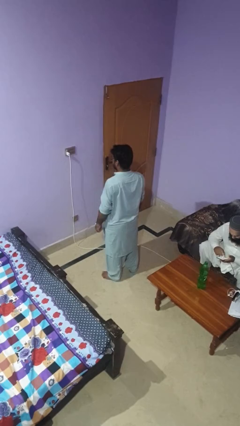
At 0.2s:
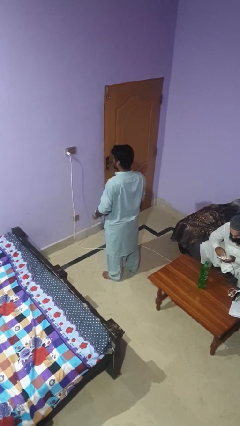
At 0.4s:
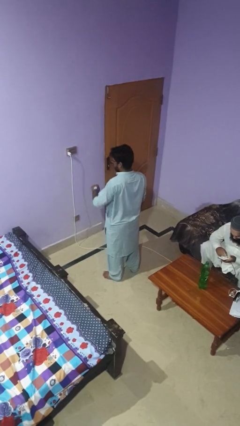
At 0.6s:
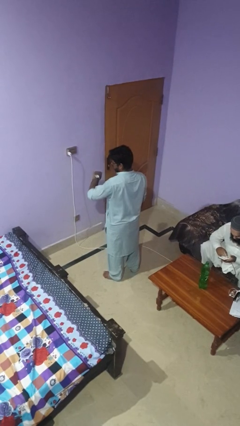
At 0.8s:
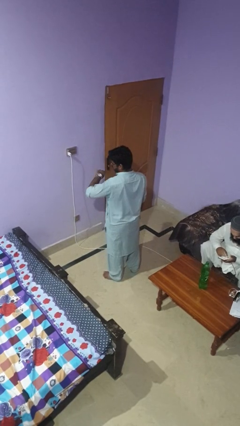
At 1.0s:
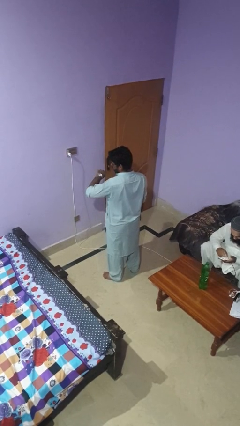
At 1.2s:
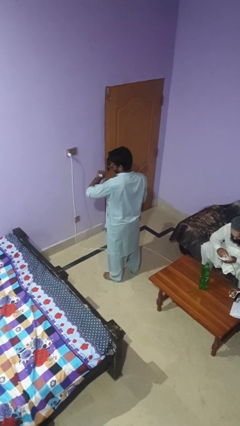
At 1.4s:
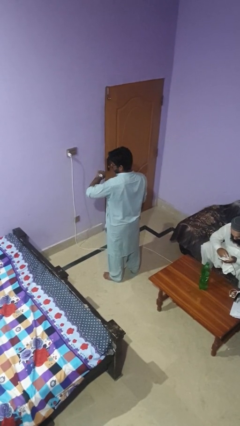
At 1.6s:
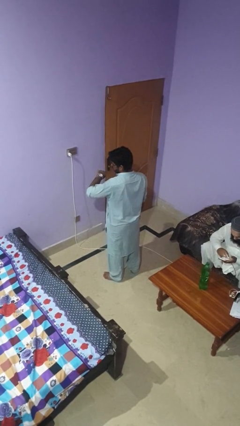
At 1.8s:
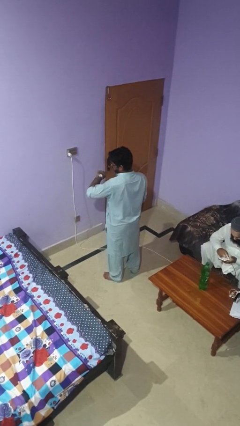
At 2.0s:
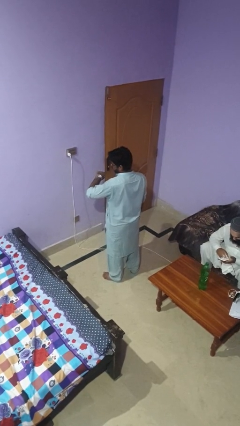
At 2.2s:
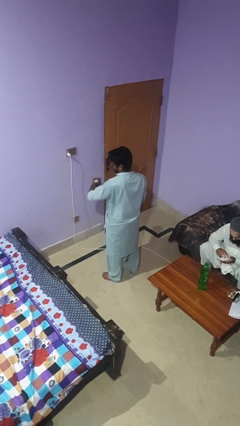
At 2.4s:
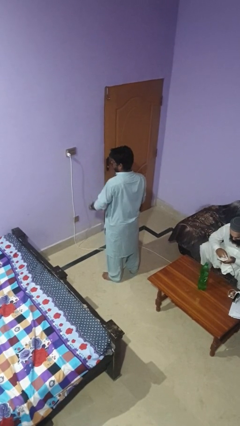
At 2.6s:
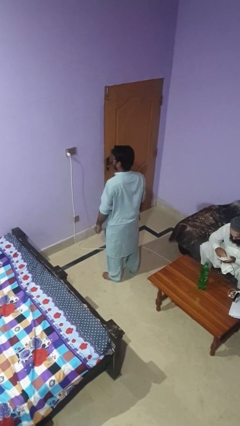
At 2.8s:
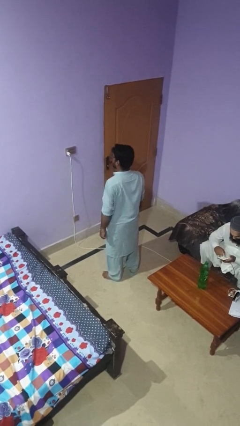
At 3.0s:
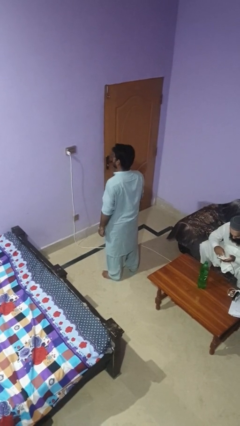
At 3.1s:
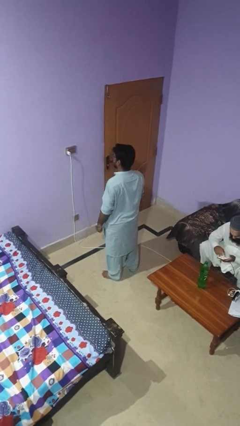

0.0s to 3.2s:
person looks at wristwatch

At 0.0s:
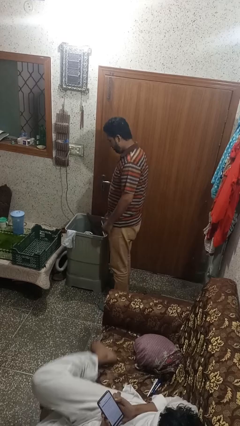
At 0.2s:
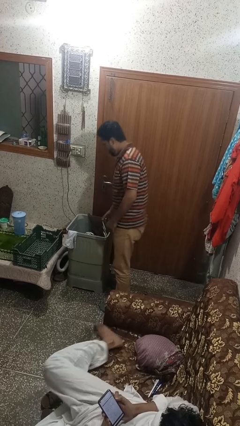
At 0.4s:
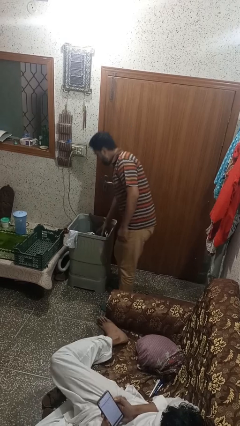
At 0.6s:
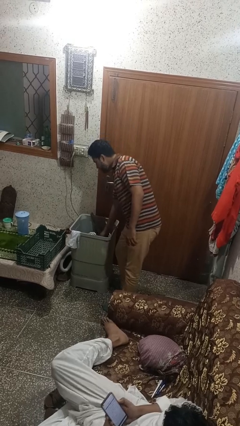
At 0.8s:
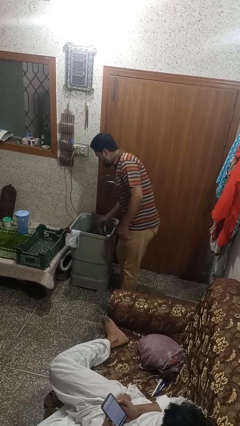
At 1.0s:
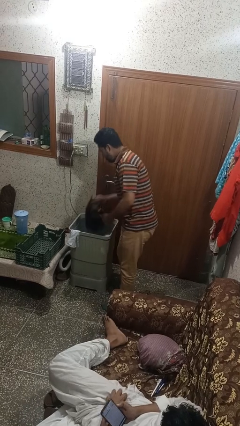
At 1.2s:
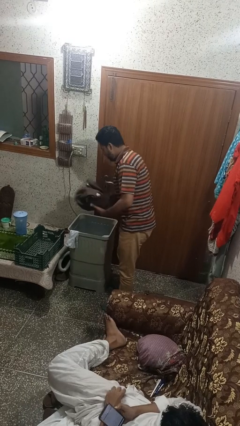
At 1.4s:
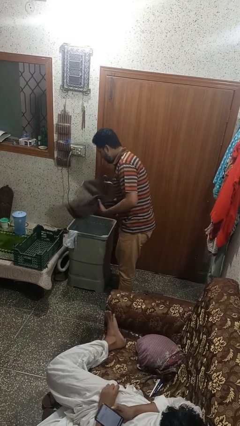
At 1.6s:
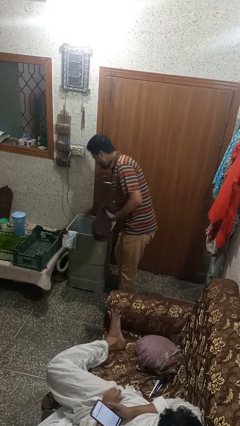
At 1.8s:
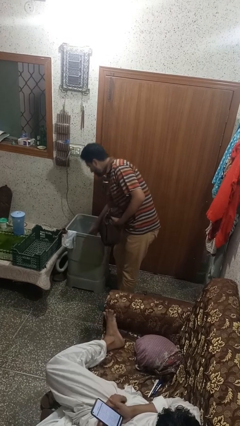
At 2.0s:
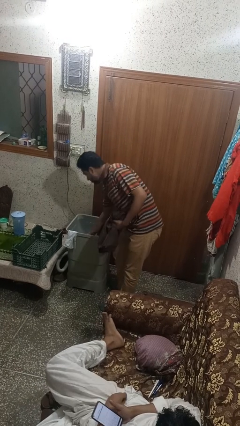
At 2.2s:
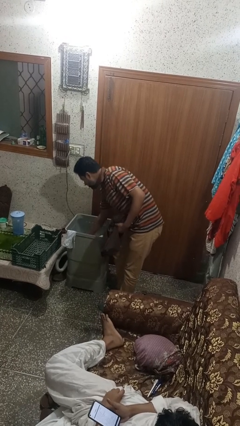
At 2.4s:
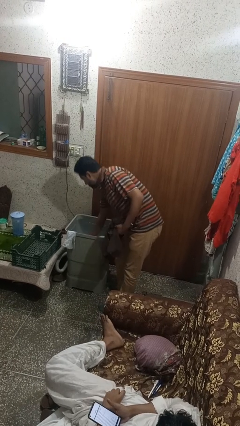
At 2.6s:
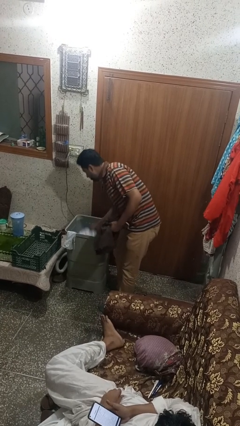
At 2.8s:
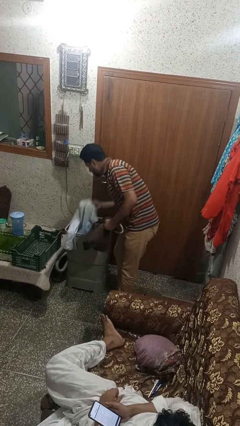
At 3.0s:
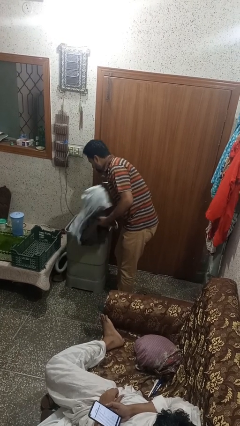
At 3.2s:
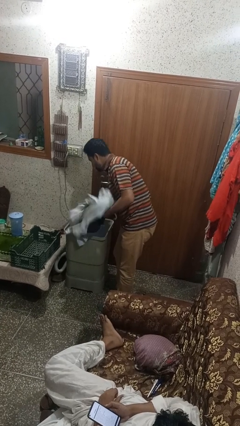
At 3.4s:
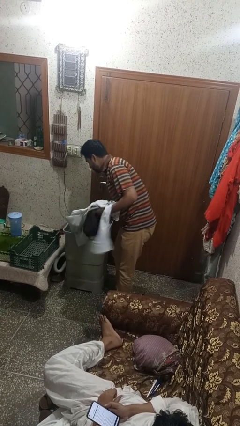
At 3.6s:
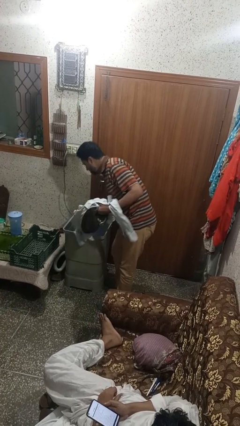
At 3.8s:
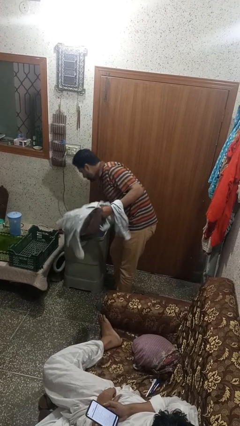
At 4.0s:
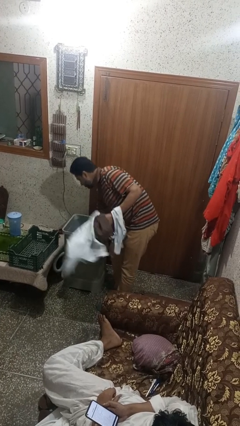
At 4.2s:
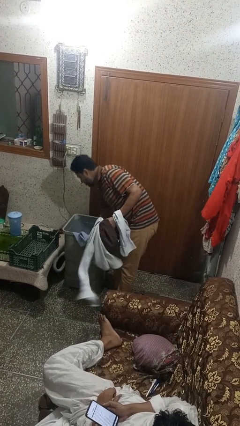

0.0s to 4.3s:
person unloads dryer

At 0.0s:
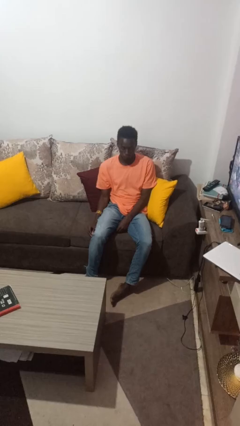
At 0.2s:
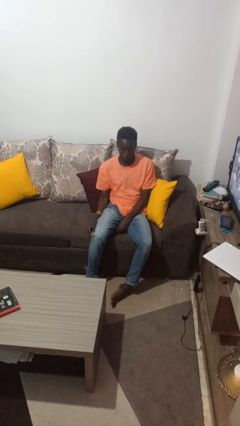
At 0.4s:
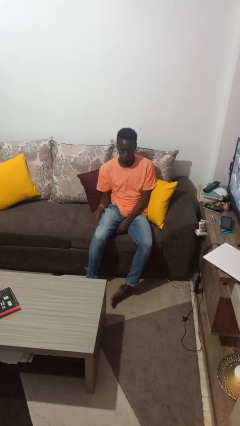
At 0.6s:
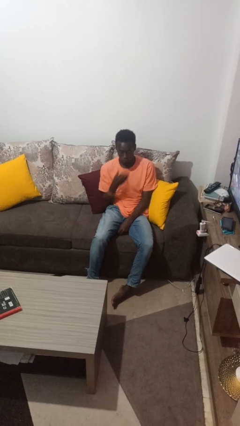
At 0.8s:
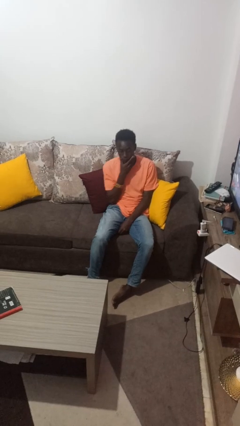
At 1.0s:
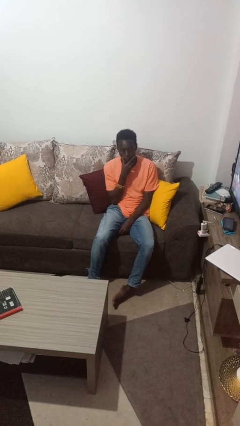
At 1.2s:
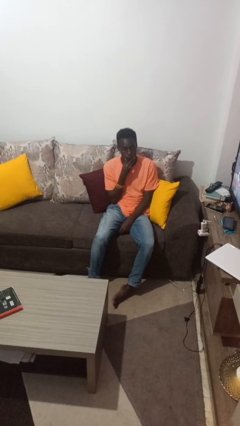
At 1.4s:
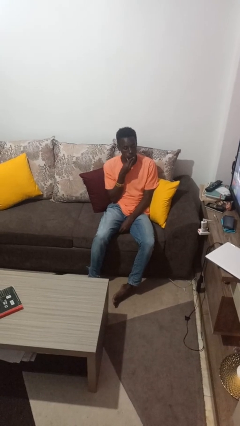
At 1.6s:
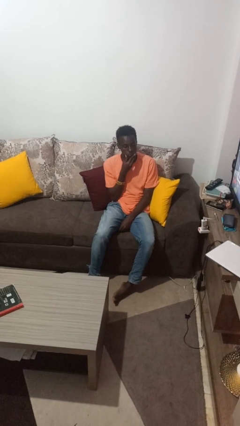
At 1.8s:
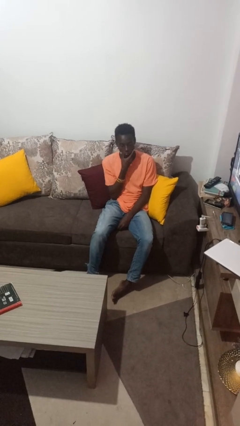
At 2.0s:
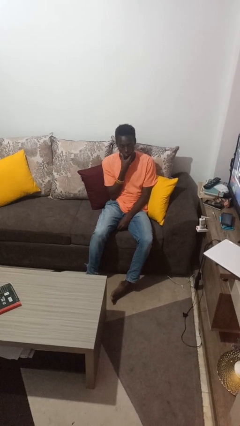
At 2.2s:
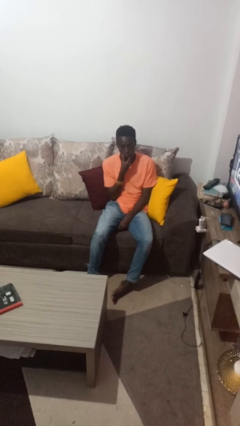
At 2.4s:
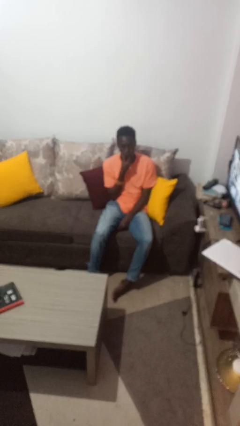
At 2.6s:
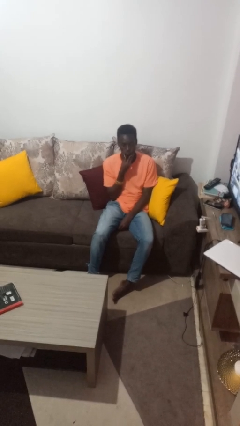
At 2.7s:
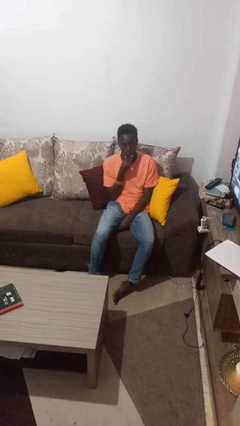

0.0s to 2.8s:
person strokes chin

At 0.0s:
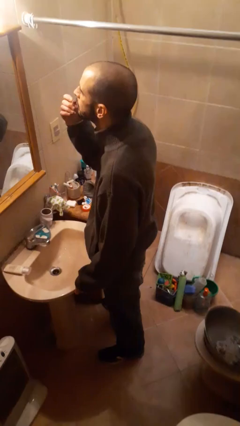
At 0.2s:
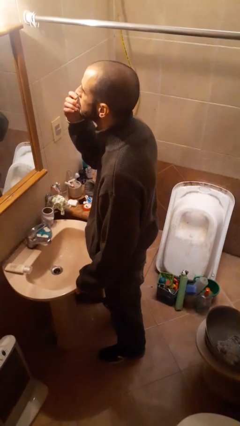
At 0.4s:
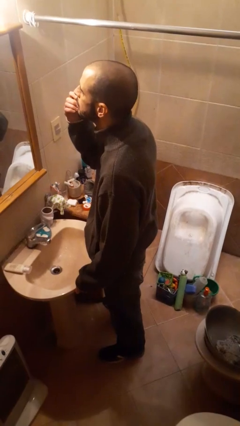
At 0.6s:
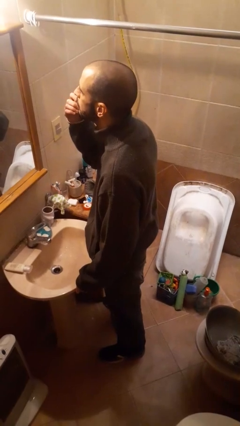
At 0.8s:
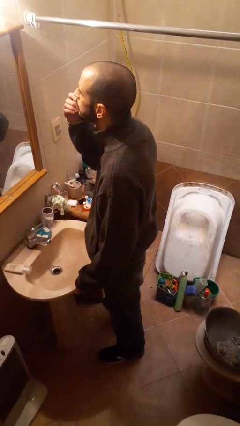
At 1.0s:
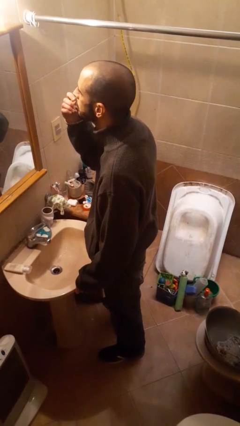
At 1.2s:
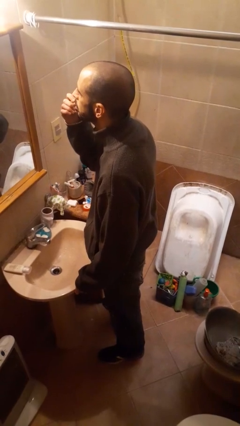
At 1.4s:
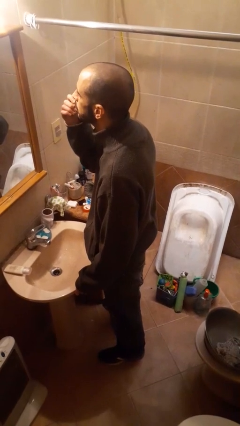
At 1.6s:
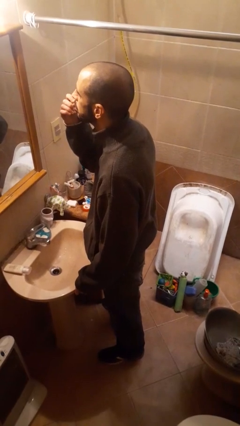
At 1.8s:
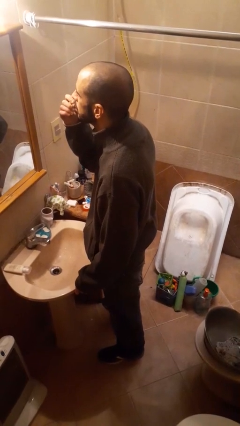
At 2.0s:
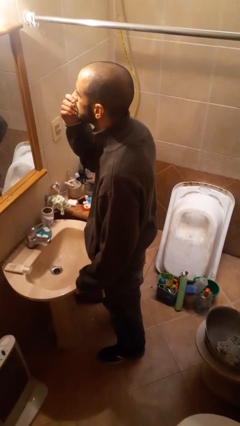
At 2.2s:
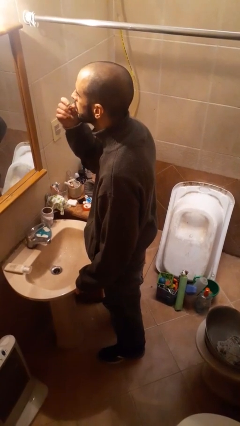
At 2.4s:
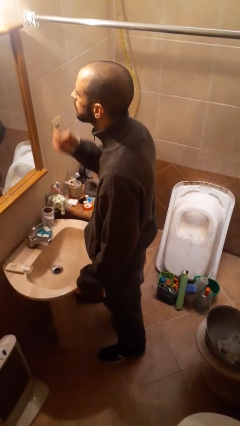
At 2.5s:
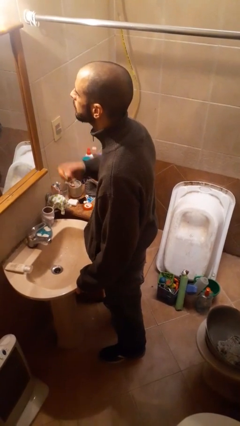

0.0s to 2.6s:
person applies lip makeup

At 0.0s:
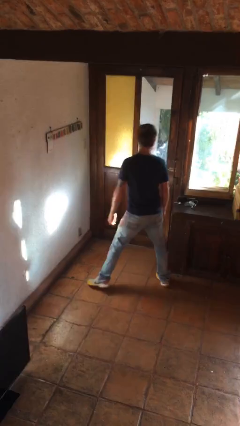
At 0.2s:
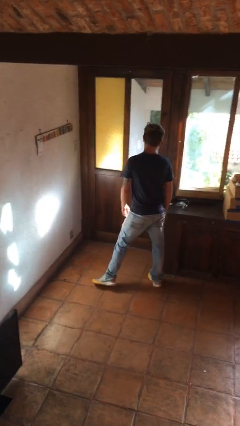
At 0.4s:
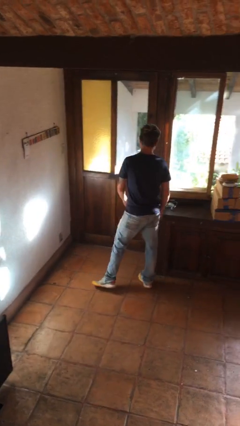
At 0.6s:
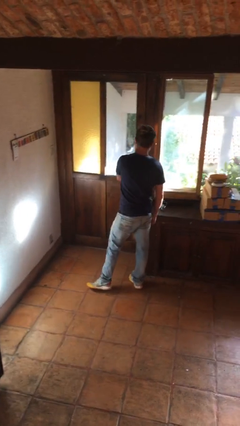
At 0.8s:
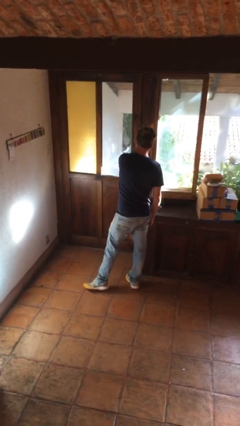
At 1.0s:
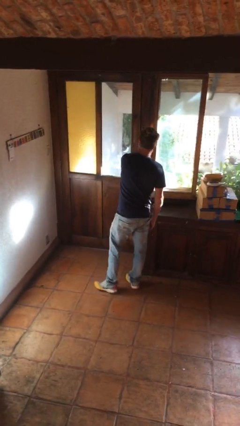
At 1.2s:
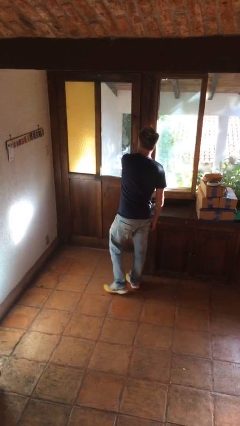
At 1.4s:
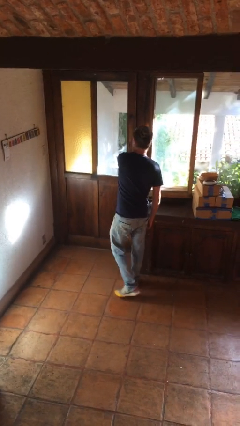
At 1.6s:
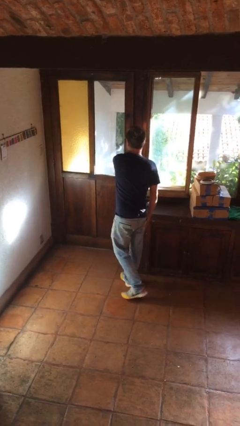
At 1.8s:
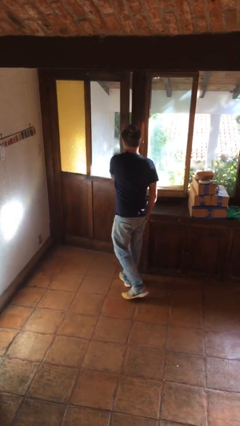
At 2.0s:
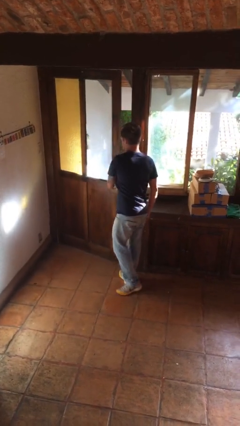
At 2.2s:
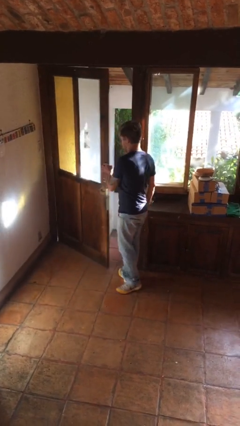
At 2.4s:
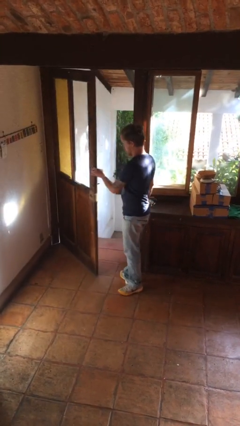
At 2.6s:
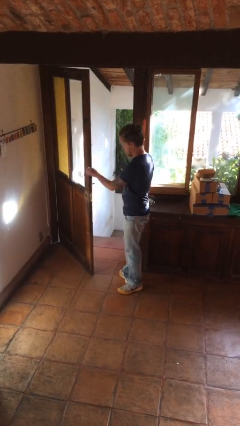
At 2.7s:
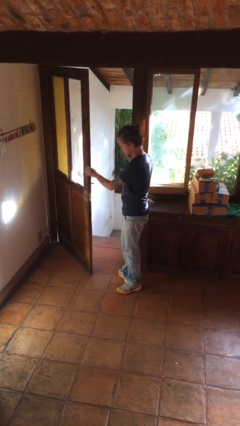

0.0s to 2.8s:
person opens facility door

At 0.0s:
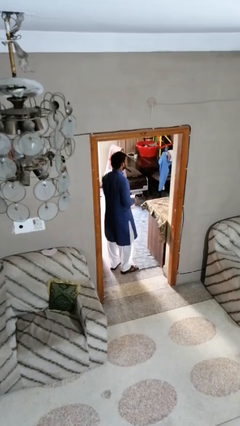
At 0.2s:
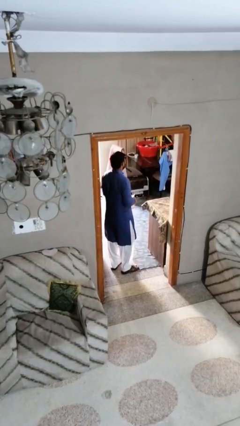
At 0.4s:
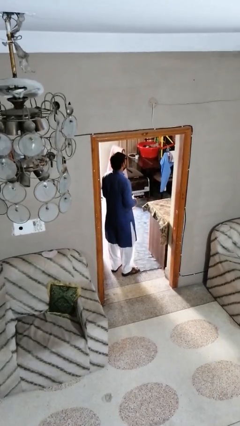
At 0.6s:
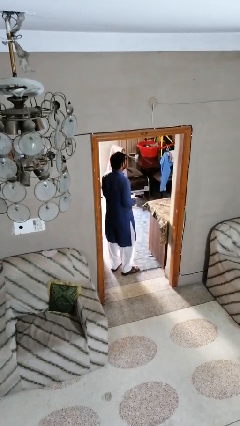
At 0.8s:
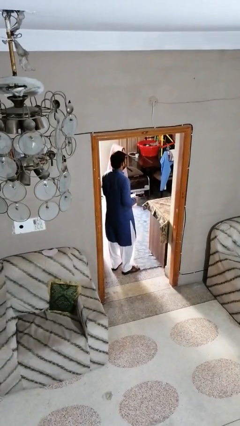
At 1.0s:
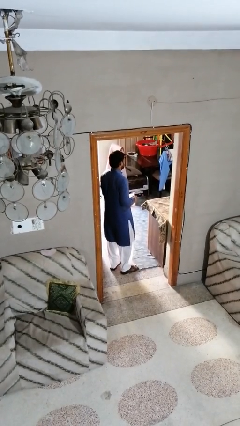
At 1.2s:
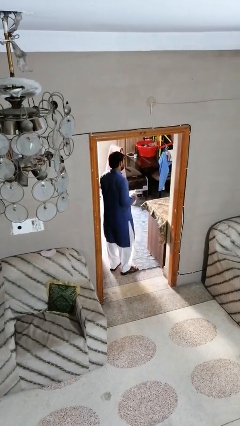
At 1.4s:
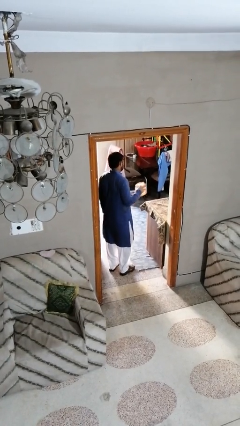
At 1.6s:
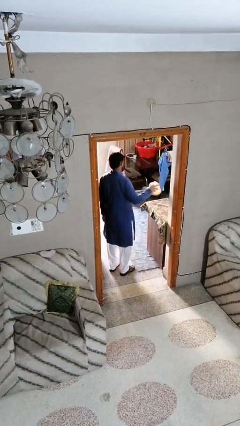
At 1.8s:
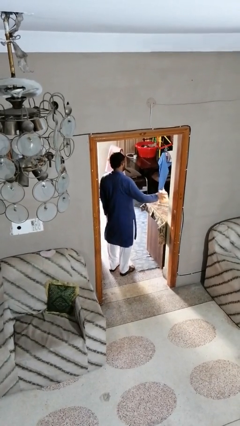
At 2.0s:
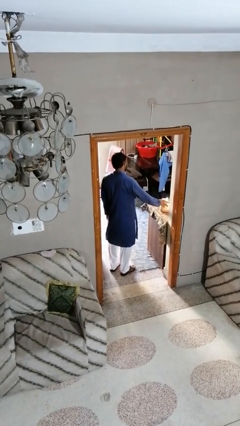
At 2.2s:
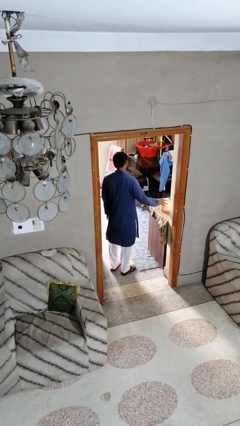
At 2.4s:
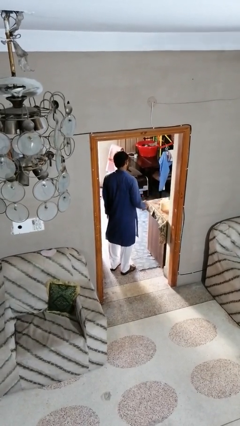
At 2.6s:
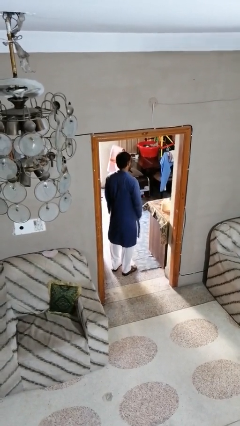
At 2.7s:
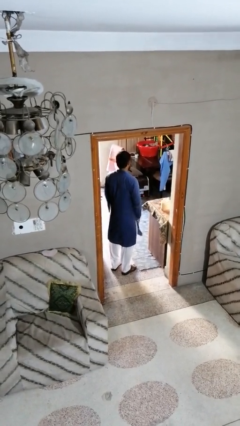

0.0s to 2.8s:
person puts down object on countertop
